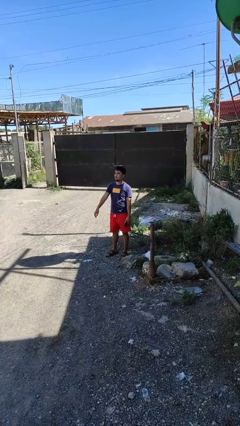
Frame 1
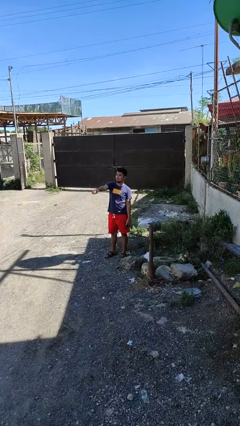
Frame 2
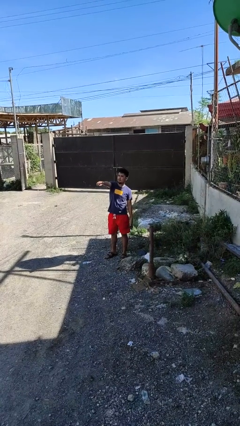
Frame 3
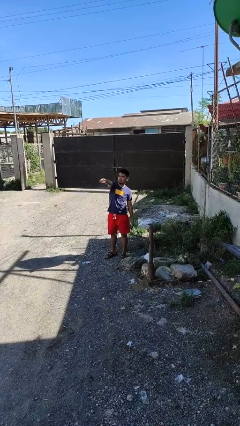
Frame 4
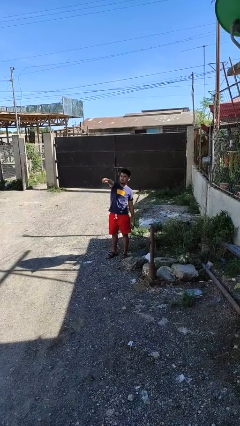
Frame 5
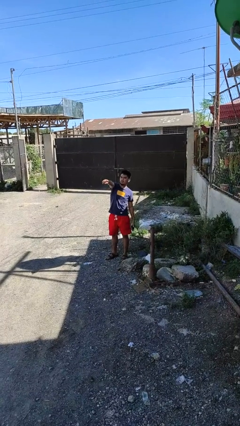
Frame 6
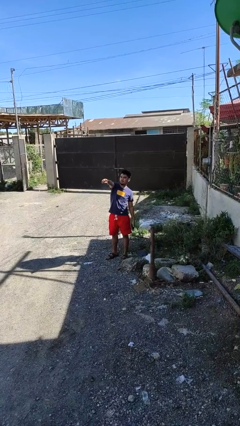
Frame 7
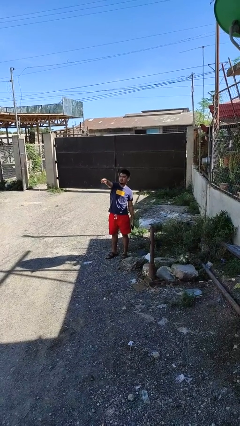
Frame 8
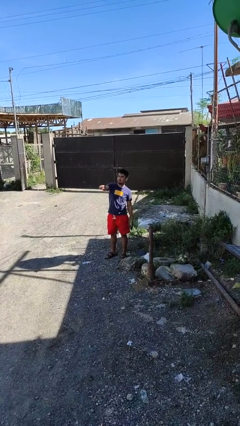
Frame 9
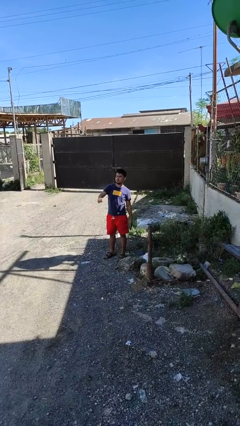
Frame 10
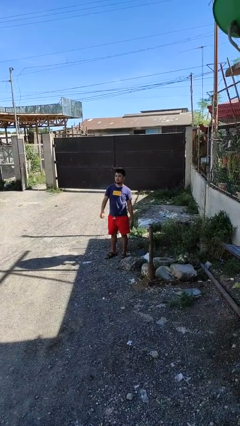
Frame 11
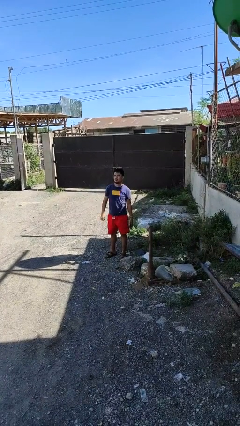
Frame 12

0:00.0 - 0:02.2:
person points at person

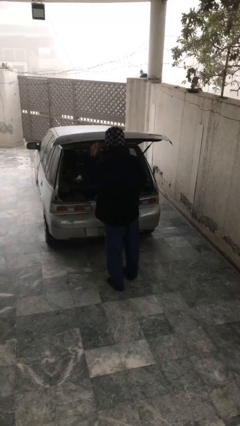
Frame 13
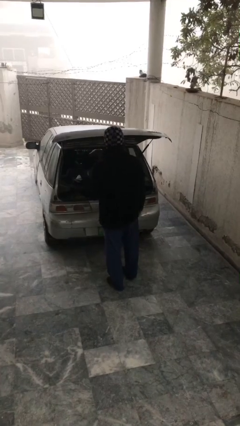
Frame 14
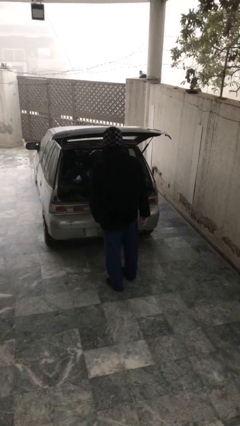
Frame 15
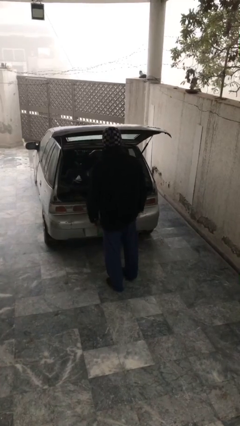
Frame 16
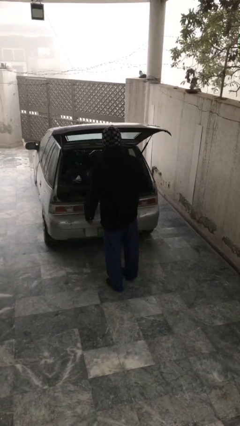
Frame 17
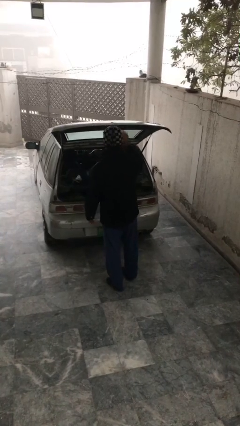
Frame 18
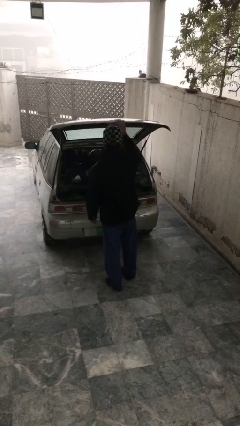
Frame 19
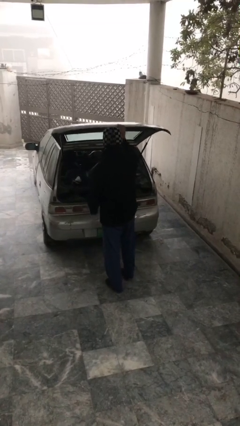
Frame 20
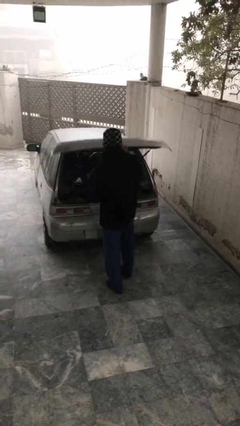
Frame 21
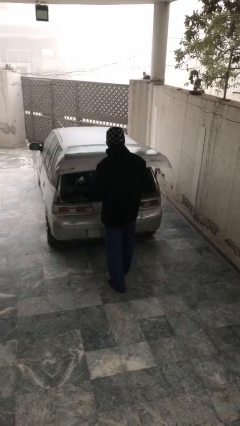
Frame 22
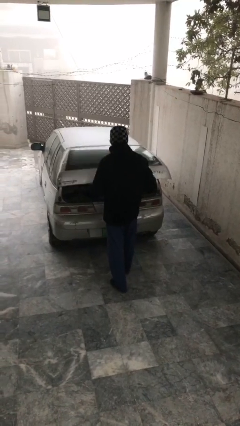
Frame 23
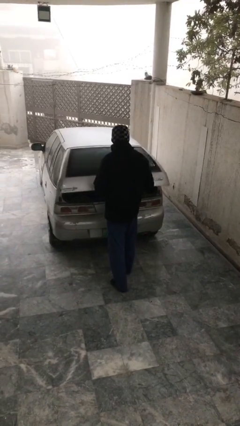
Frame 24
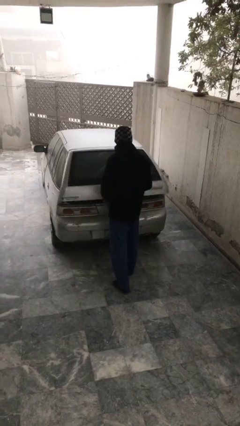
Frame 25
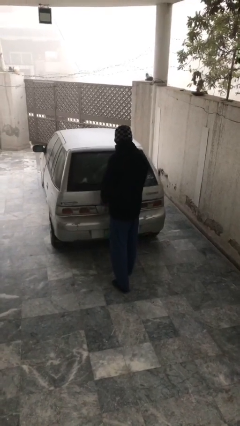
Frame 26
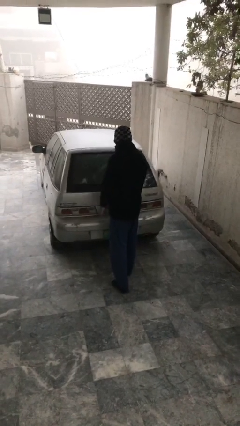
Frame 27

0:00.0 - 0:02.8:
person closes car trunk

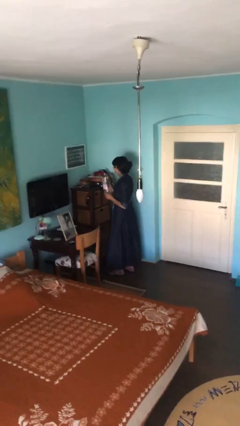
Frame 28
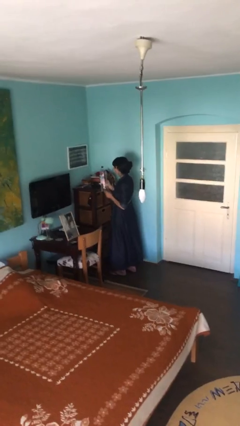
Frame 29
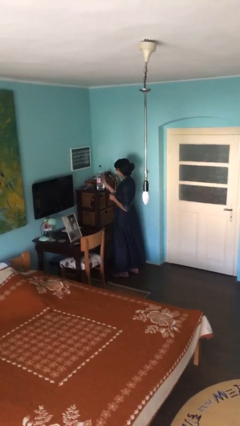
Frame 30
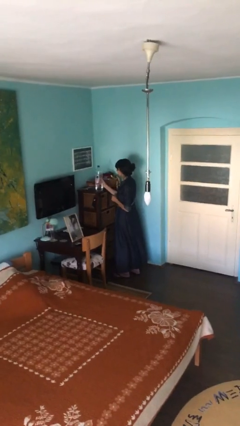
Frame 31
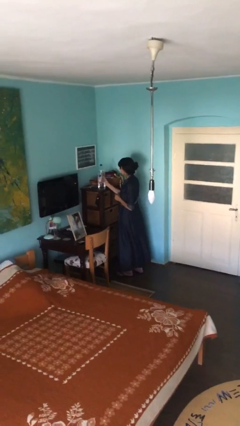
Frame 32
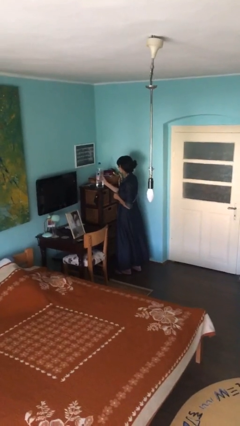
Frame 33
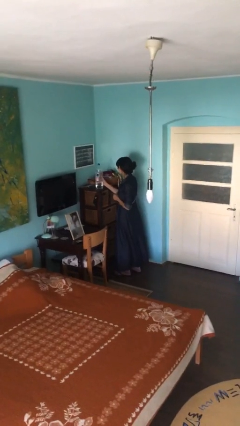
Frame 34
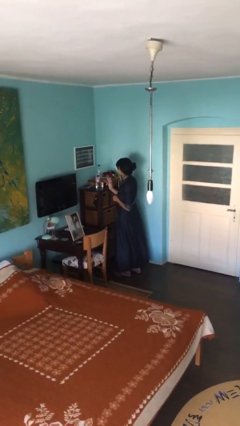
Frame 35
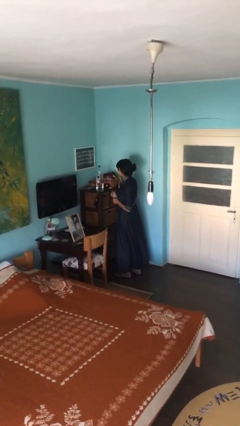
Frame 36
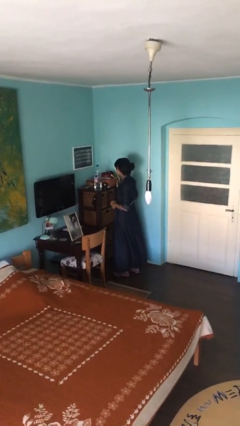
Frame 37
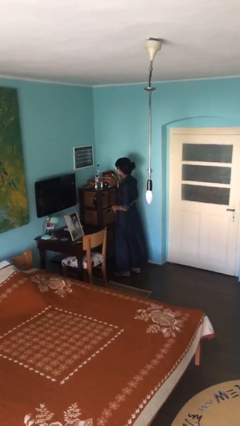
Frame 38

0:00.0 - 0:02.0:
person puts down object on shelf

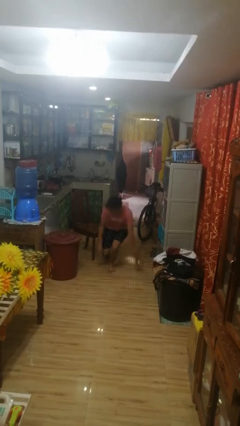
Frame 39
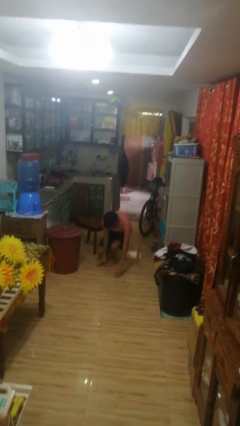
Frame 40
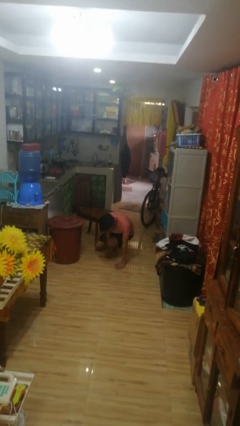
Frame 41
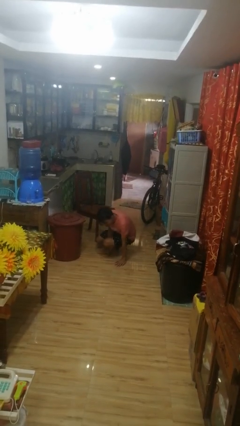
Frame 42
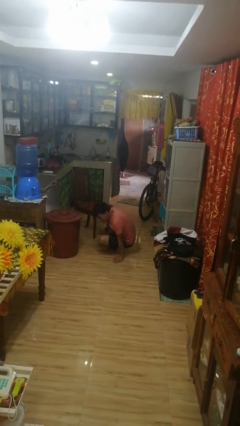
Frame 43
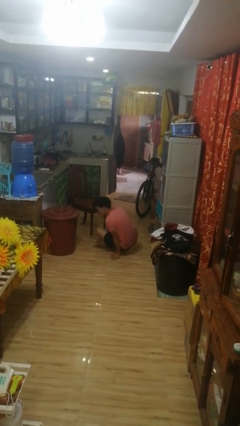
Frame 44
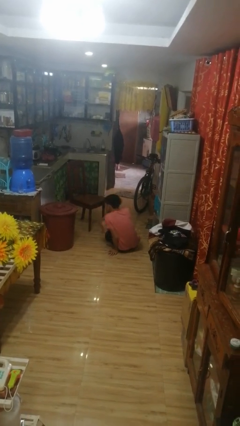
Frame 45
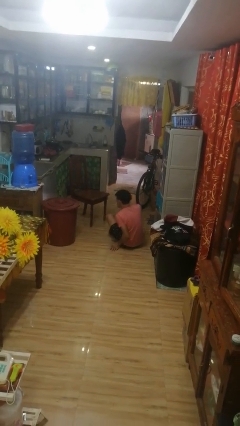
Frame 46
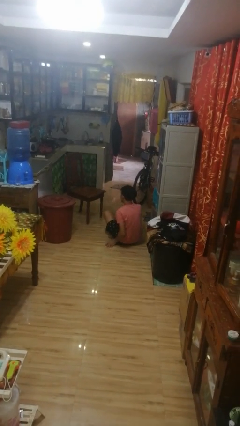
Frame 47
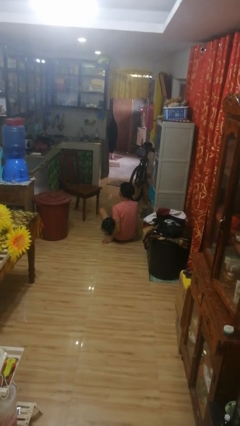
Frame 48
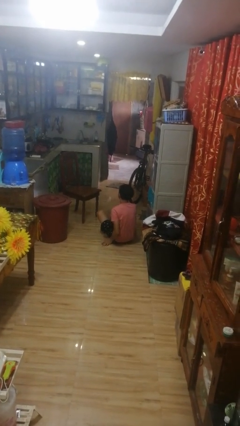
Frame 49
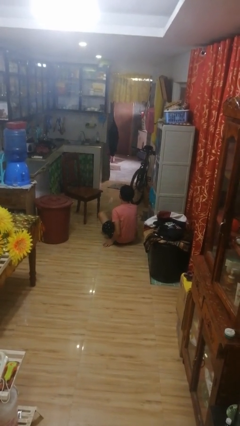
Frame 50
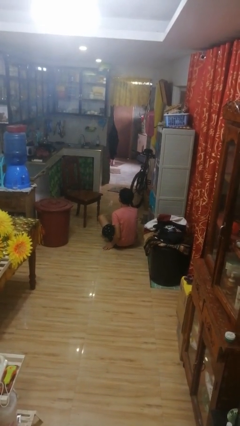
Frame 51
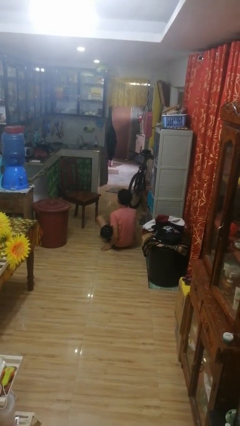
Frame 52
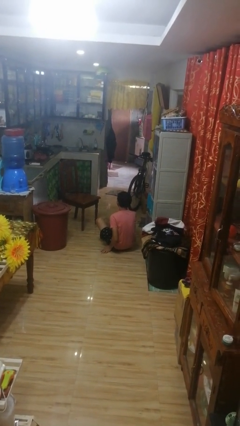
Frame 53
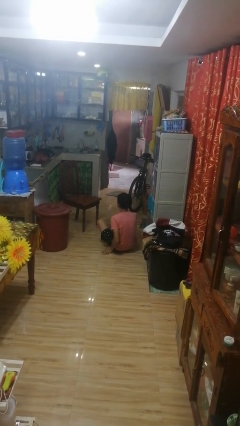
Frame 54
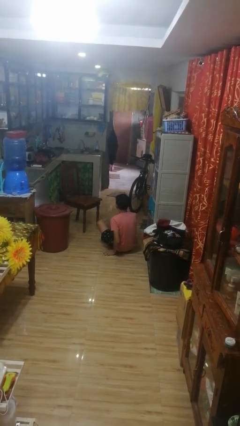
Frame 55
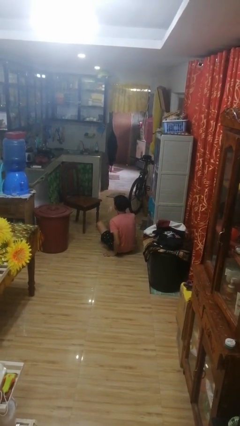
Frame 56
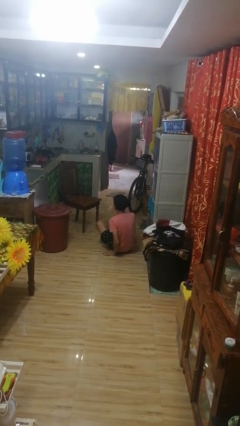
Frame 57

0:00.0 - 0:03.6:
person lies down on floor

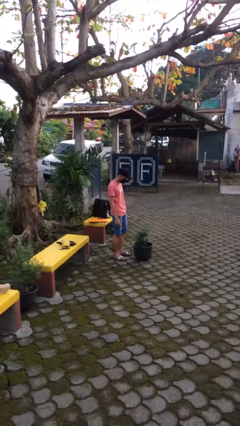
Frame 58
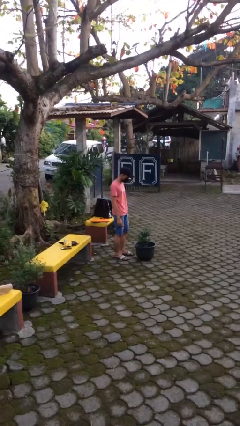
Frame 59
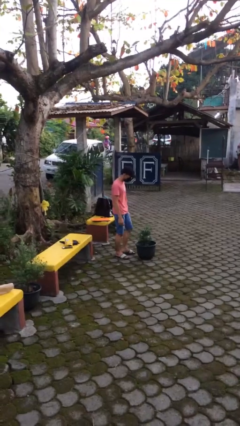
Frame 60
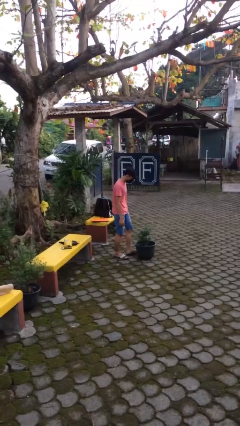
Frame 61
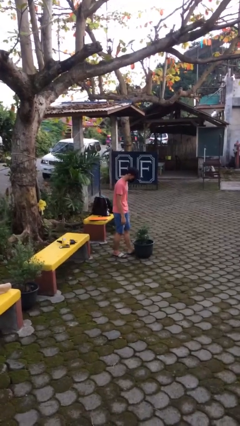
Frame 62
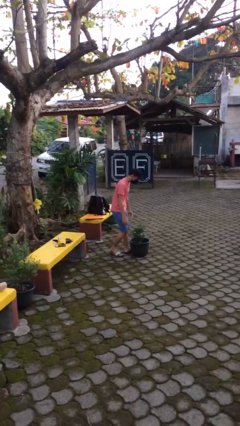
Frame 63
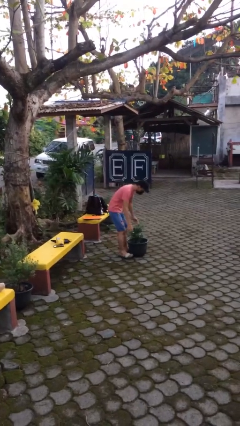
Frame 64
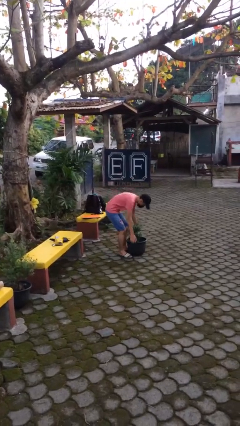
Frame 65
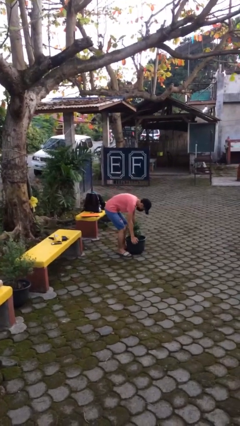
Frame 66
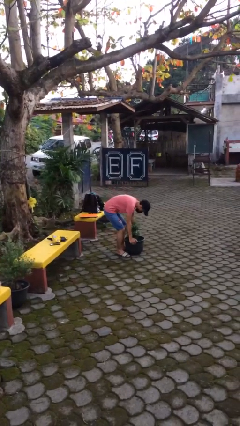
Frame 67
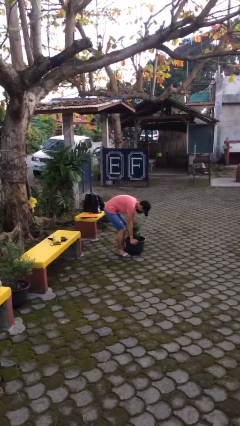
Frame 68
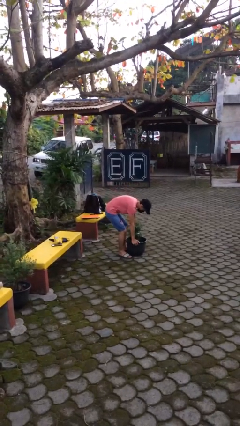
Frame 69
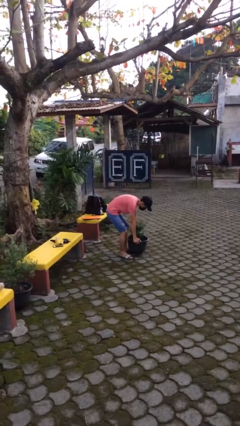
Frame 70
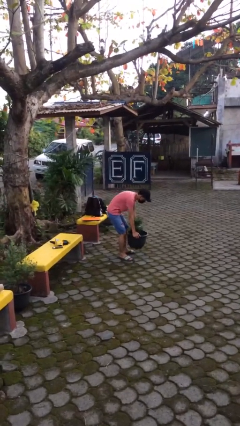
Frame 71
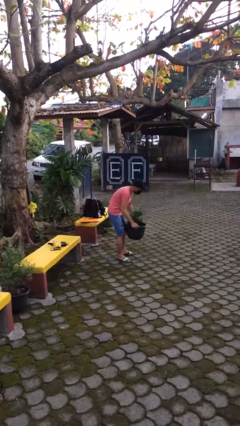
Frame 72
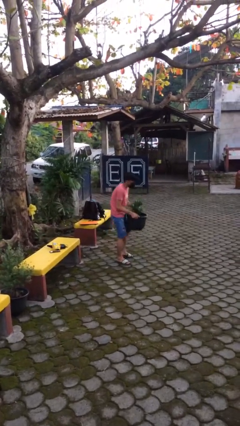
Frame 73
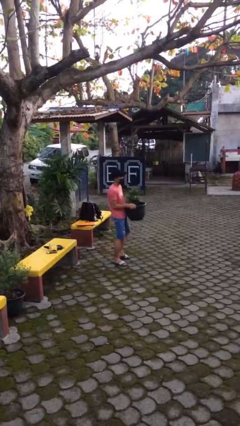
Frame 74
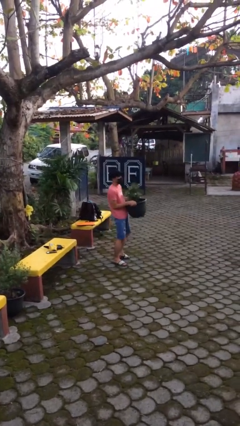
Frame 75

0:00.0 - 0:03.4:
person picks up object from floor

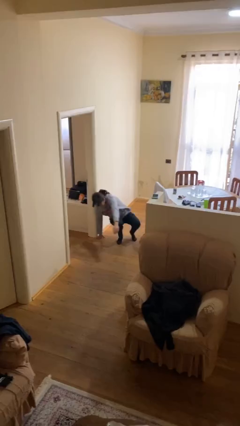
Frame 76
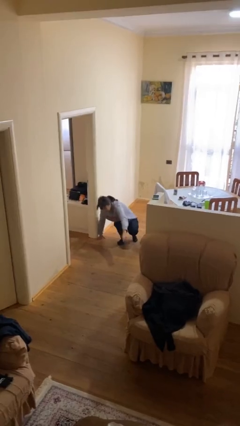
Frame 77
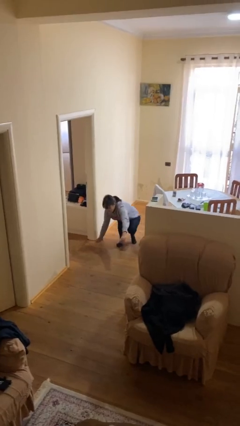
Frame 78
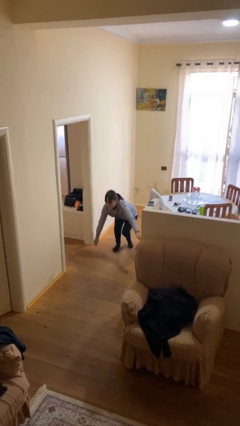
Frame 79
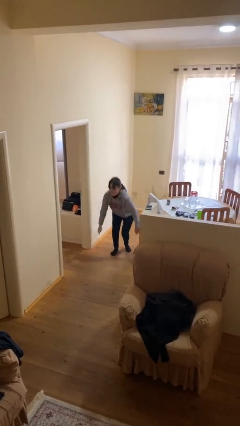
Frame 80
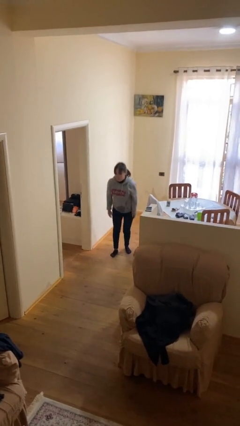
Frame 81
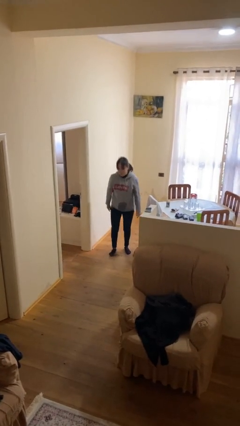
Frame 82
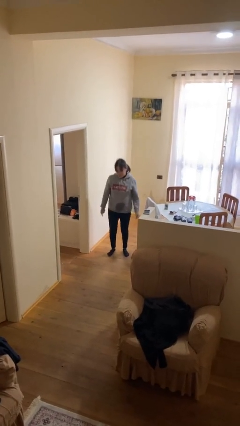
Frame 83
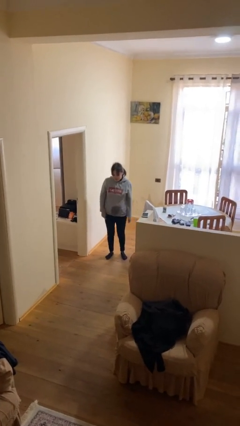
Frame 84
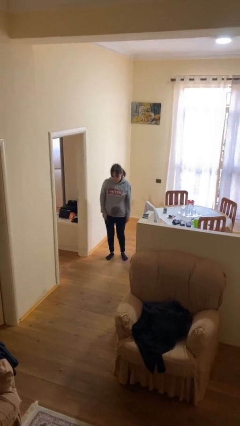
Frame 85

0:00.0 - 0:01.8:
person stands up

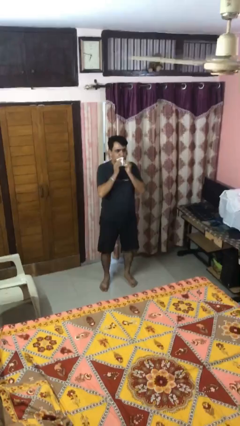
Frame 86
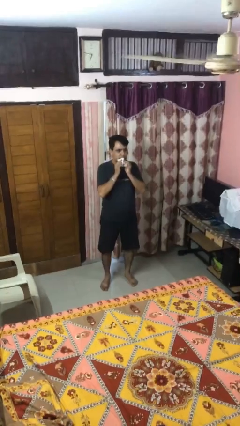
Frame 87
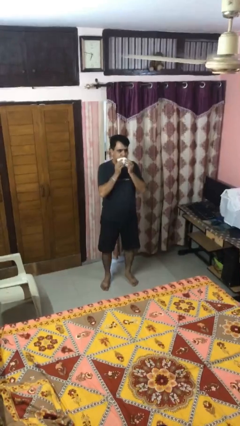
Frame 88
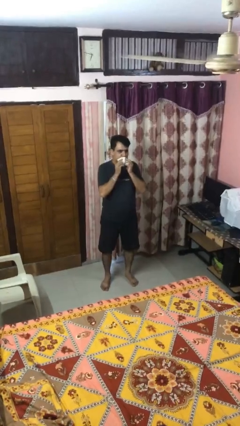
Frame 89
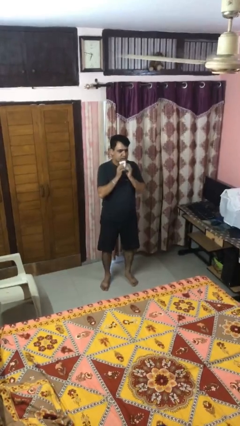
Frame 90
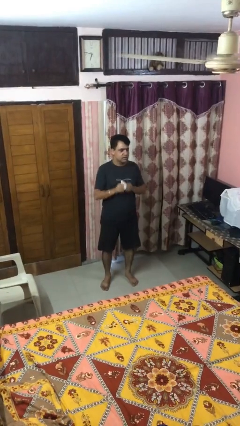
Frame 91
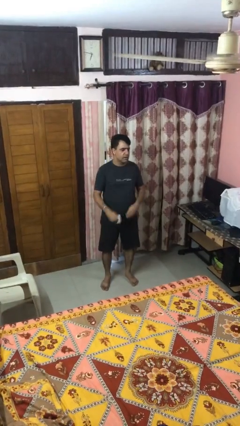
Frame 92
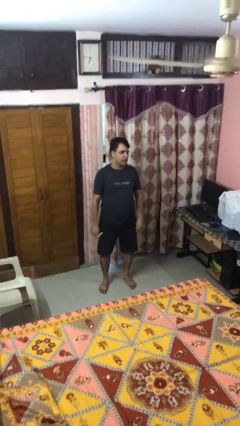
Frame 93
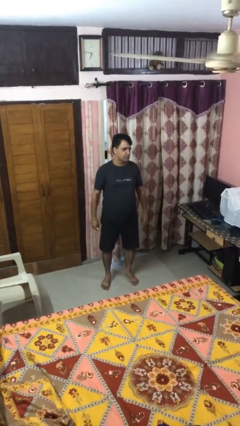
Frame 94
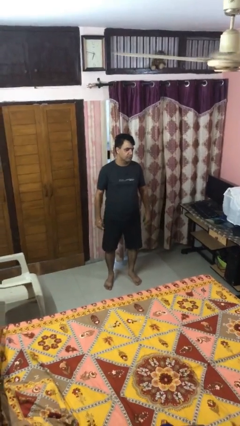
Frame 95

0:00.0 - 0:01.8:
person wipes mouth with napkin
